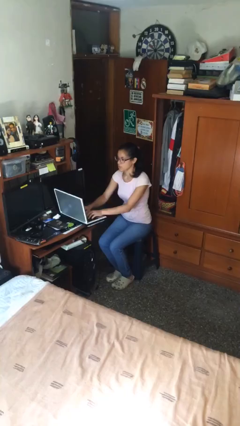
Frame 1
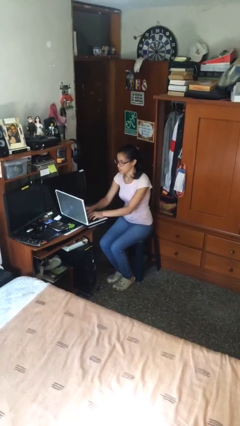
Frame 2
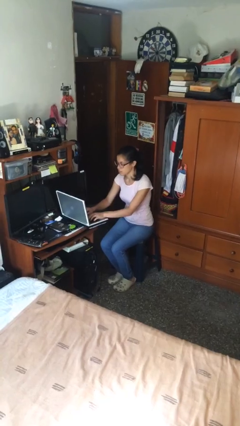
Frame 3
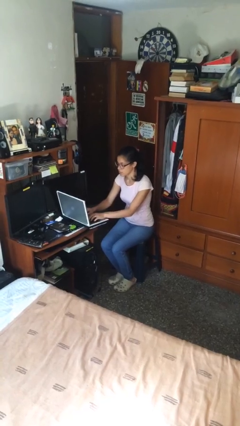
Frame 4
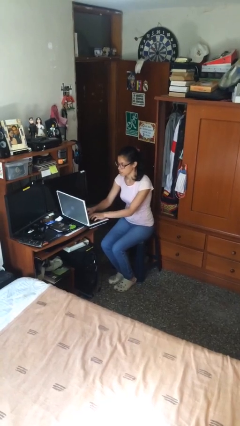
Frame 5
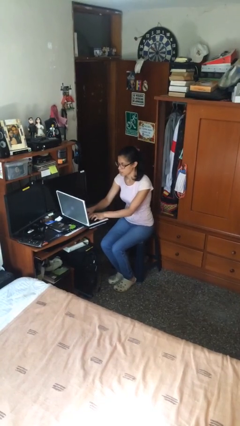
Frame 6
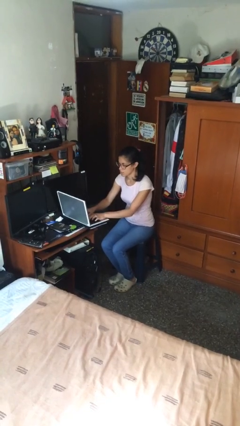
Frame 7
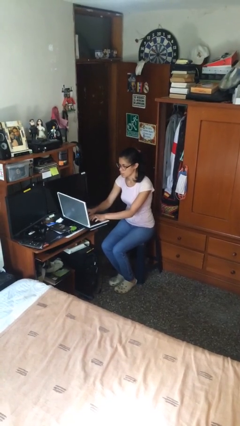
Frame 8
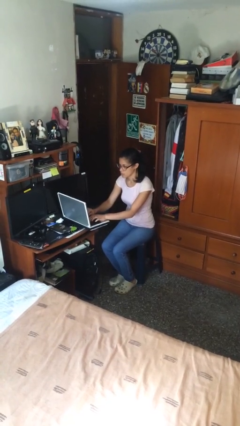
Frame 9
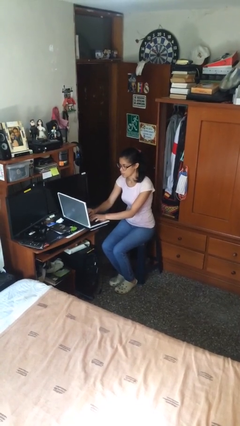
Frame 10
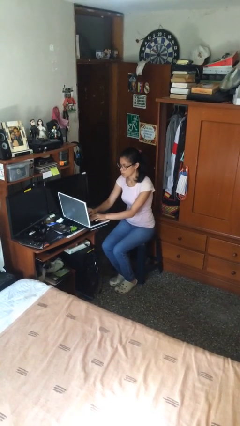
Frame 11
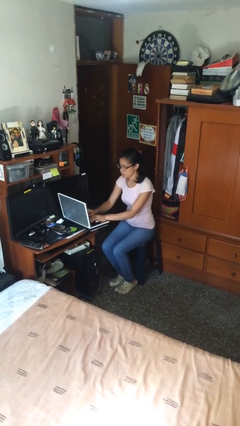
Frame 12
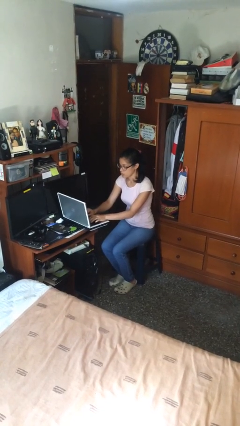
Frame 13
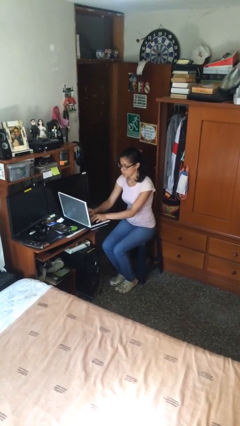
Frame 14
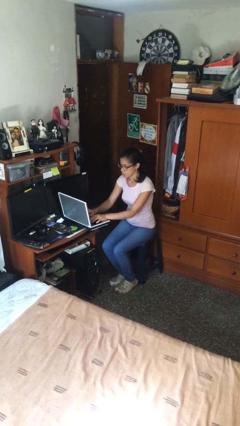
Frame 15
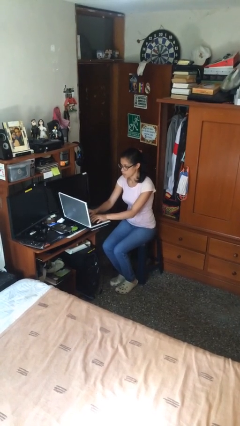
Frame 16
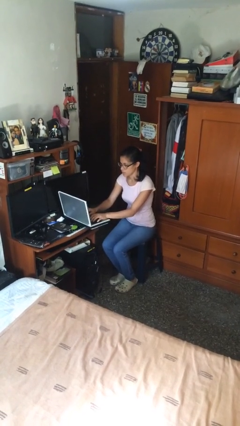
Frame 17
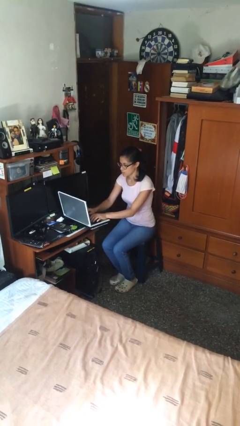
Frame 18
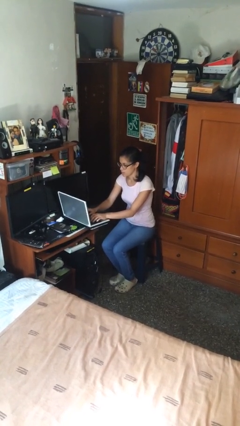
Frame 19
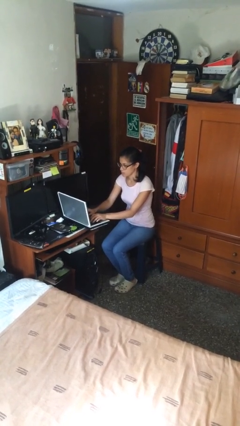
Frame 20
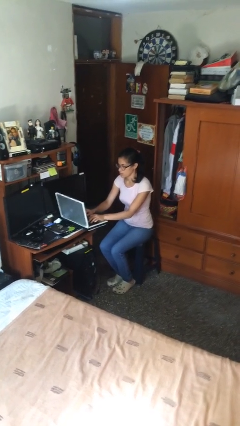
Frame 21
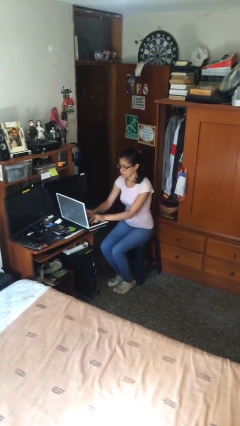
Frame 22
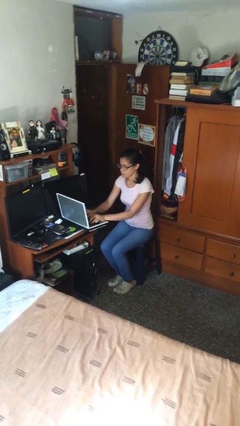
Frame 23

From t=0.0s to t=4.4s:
person interacts with laptop

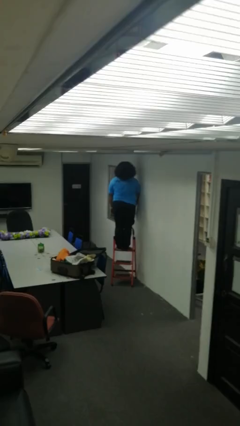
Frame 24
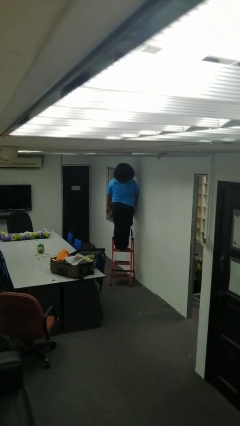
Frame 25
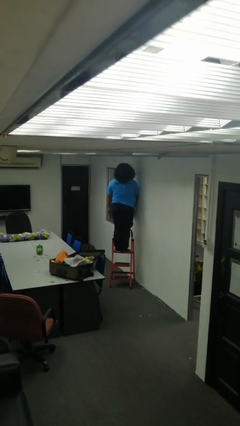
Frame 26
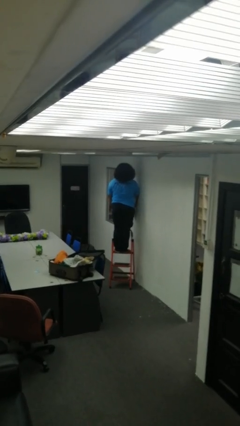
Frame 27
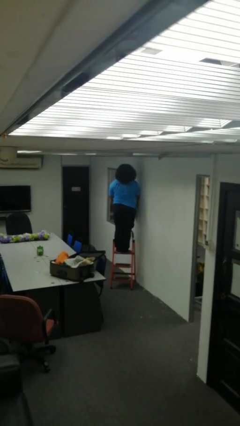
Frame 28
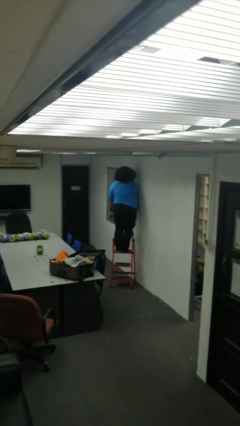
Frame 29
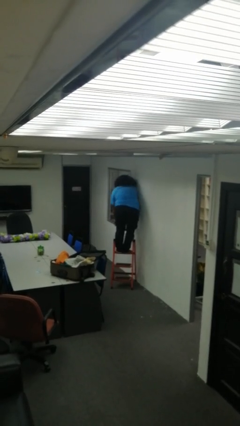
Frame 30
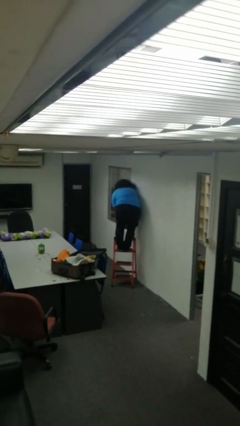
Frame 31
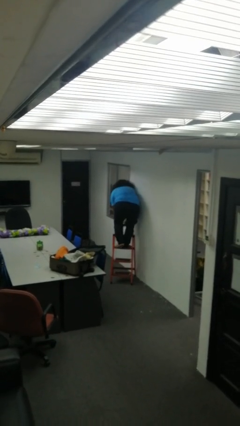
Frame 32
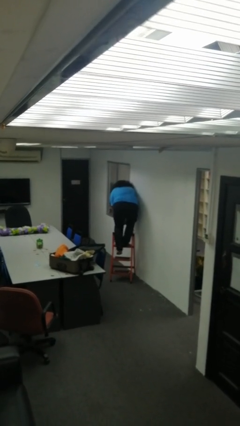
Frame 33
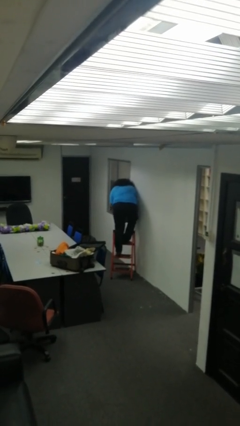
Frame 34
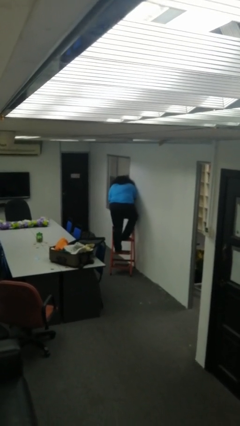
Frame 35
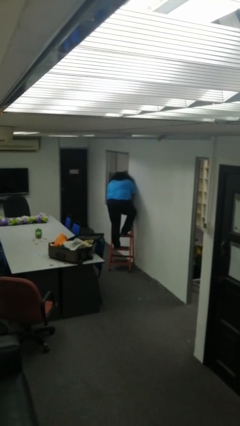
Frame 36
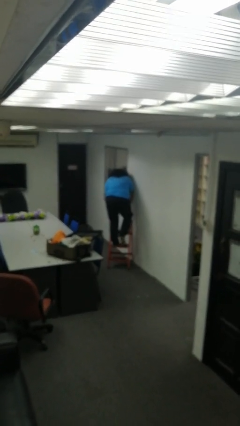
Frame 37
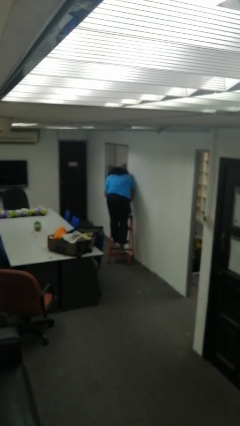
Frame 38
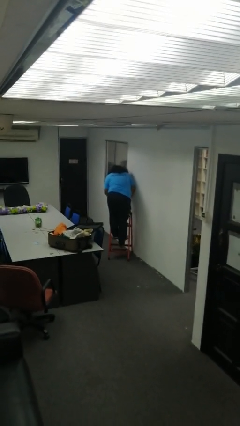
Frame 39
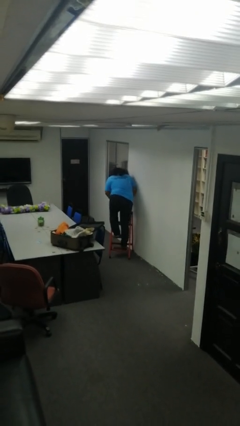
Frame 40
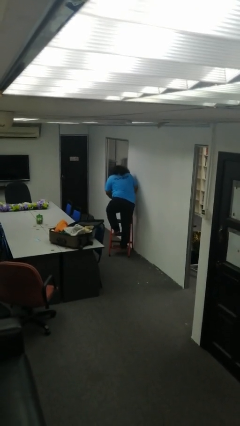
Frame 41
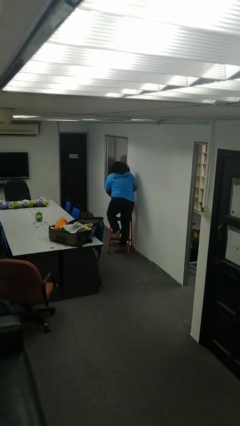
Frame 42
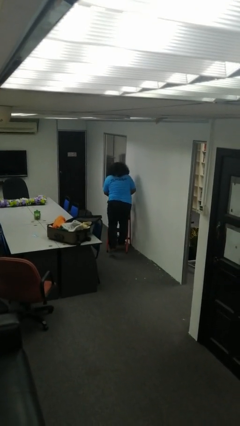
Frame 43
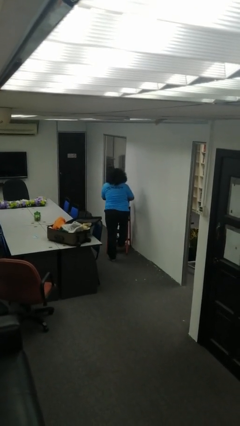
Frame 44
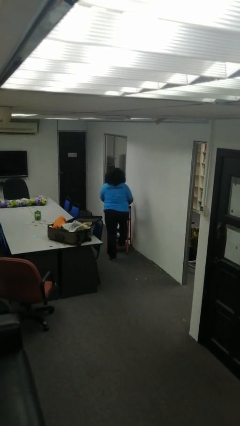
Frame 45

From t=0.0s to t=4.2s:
person climbs down ladder

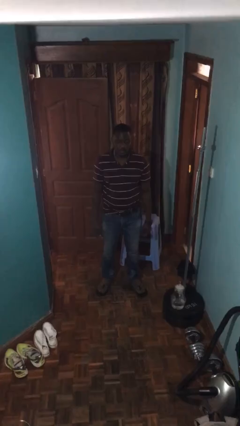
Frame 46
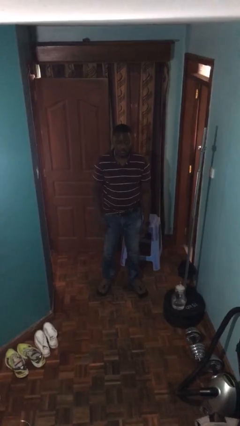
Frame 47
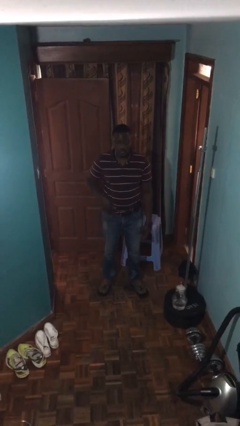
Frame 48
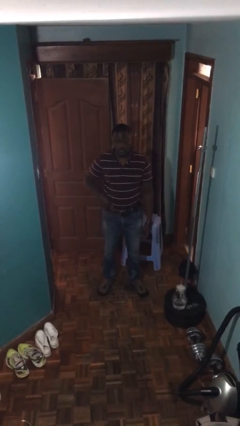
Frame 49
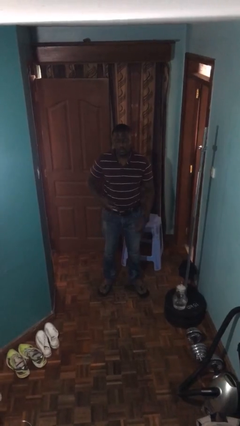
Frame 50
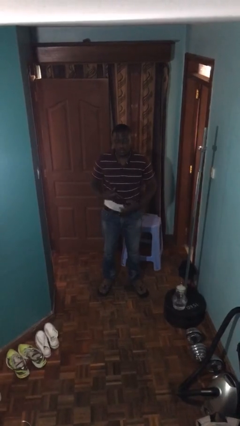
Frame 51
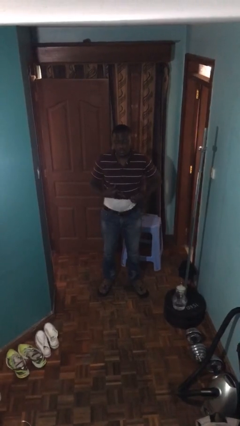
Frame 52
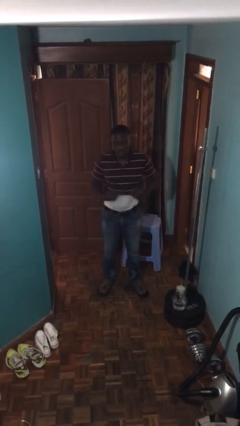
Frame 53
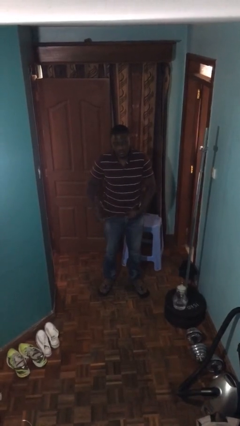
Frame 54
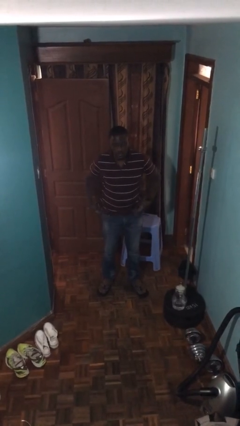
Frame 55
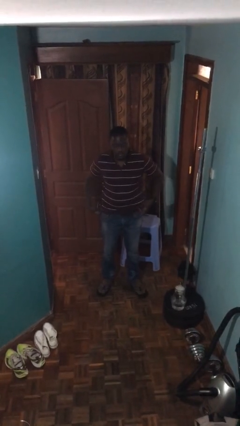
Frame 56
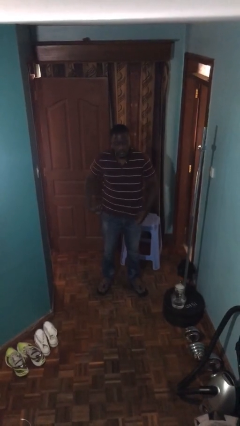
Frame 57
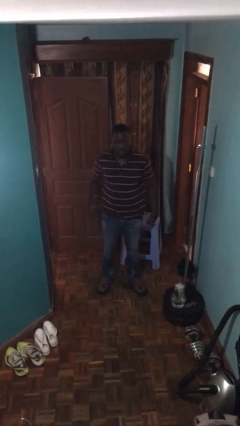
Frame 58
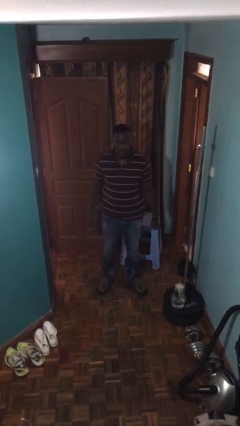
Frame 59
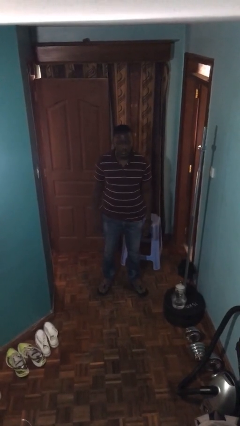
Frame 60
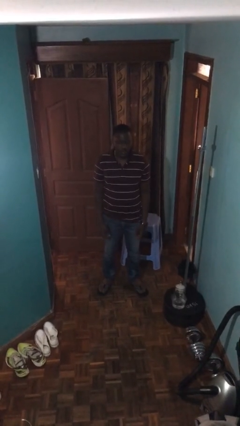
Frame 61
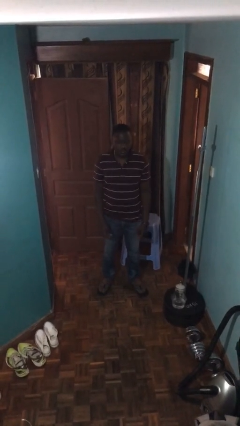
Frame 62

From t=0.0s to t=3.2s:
person untucks shirt

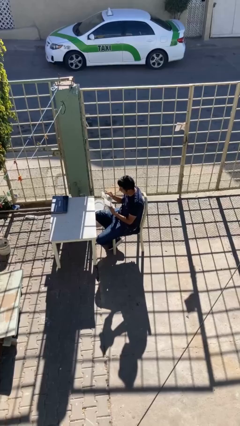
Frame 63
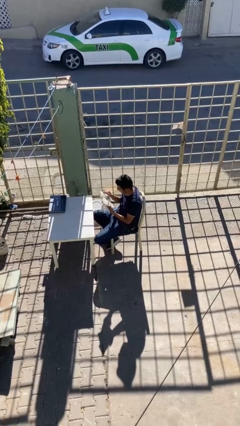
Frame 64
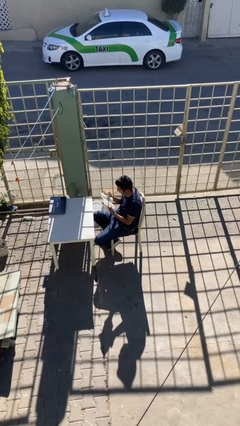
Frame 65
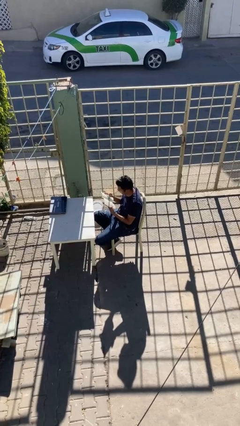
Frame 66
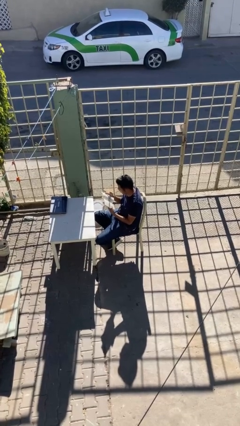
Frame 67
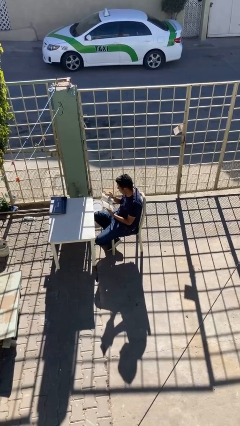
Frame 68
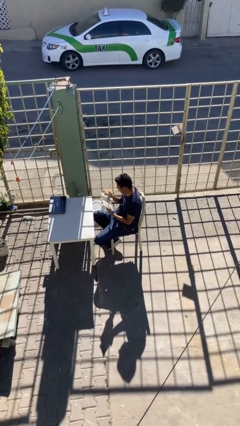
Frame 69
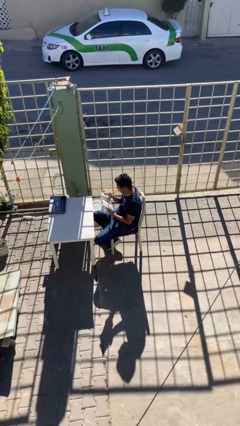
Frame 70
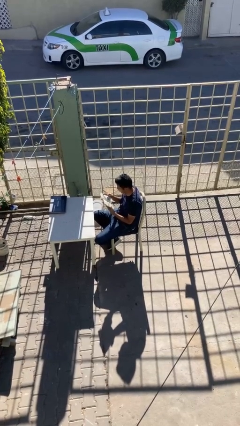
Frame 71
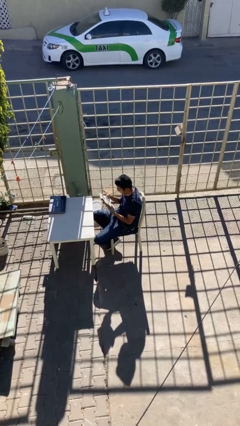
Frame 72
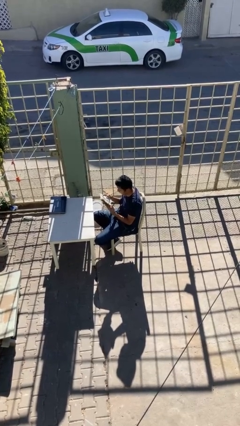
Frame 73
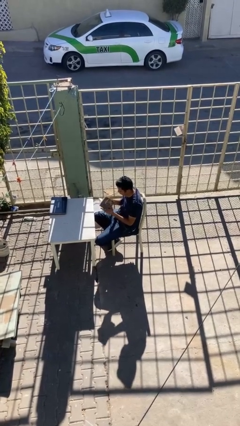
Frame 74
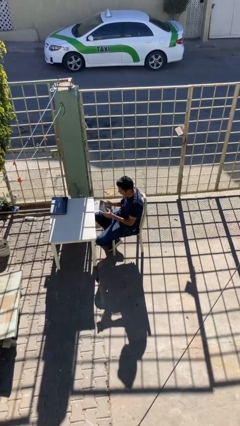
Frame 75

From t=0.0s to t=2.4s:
person reads document

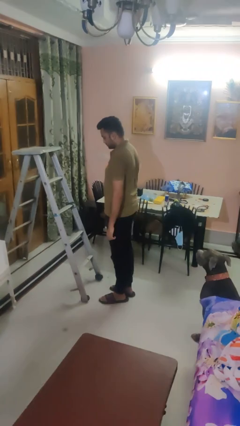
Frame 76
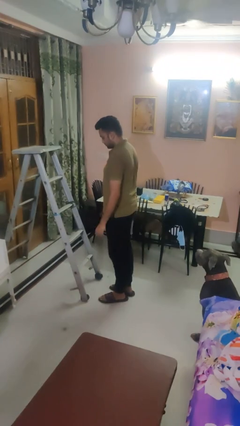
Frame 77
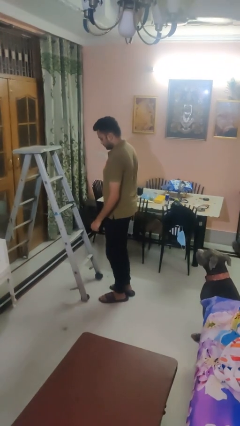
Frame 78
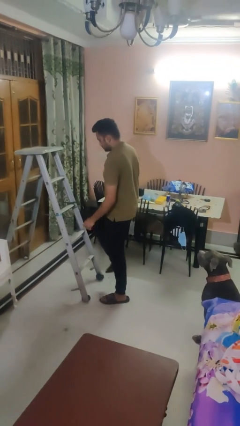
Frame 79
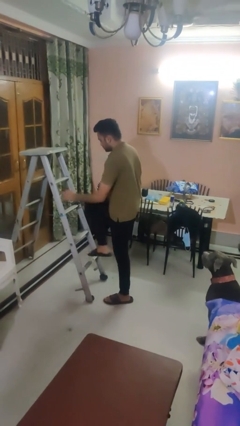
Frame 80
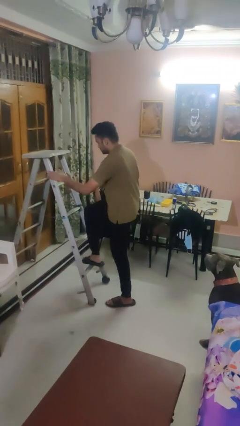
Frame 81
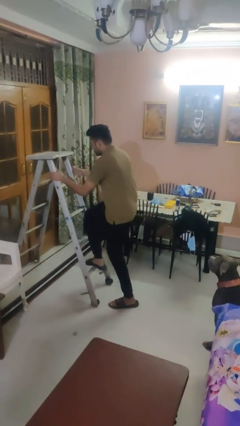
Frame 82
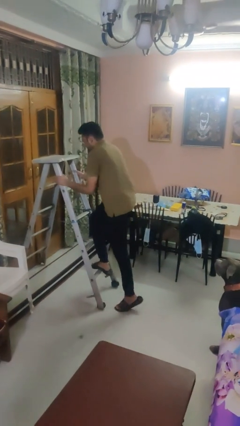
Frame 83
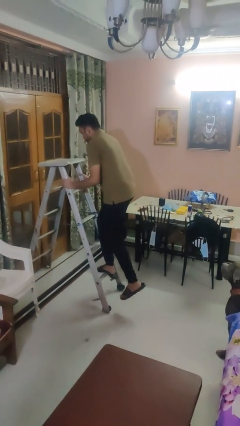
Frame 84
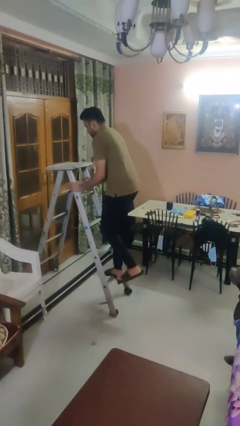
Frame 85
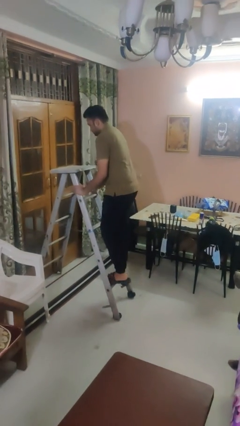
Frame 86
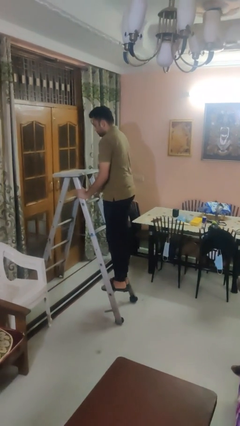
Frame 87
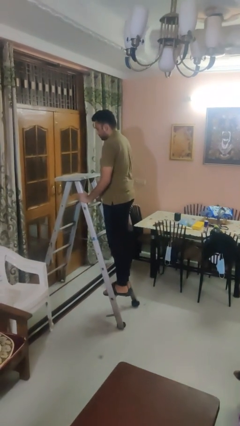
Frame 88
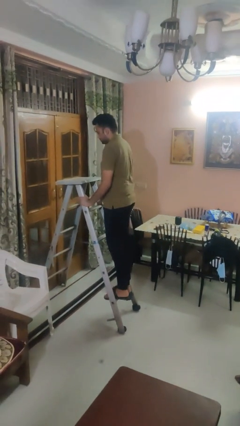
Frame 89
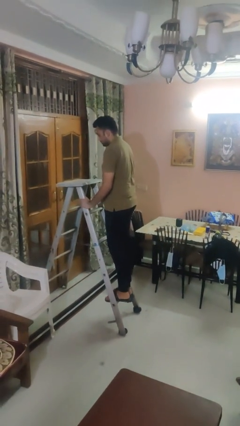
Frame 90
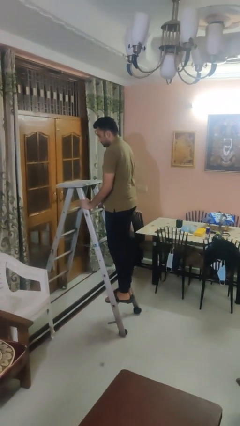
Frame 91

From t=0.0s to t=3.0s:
person climbs up ladder
